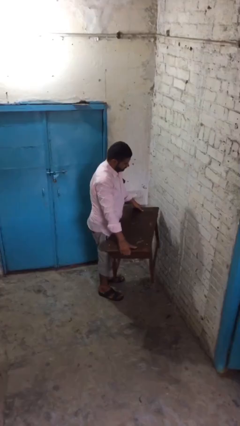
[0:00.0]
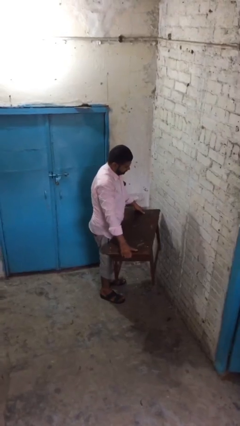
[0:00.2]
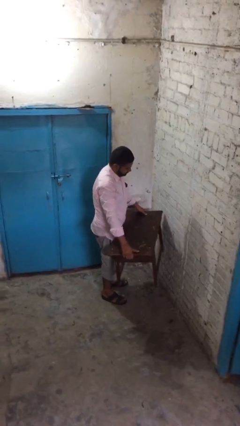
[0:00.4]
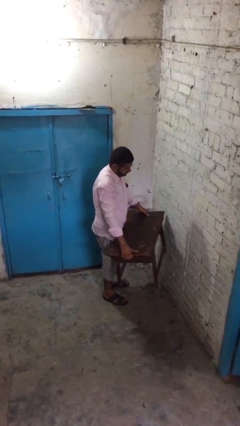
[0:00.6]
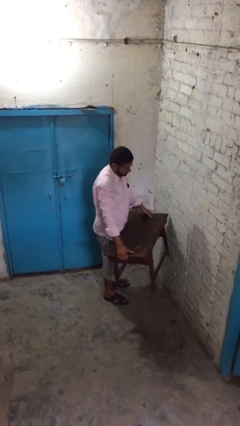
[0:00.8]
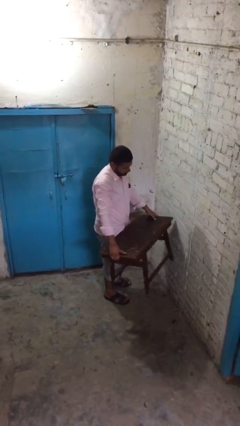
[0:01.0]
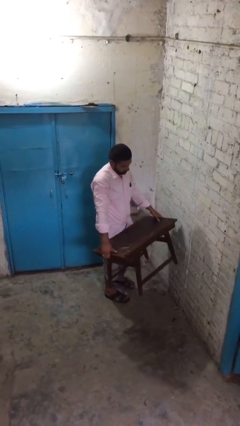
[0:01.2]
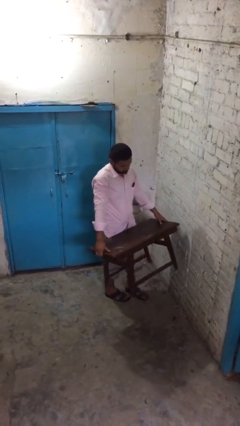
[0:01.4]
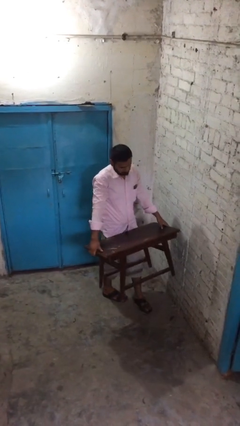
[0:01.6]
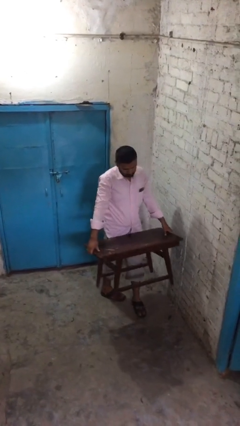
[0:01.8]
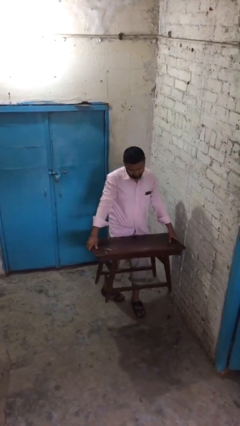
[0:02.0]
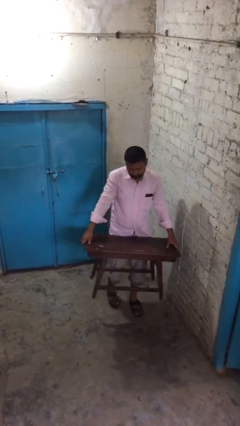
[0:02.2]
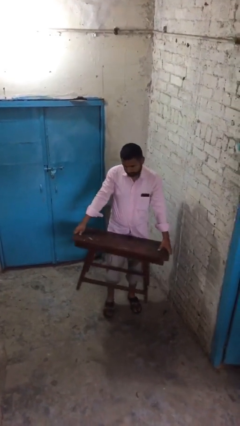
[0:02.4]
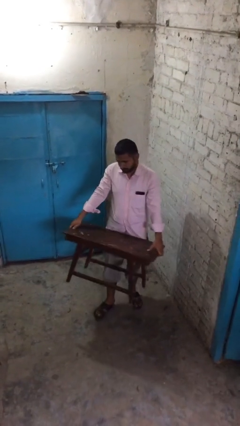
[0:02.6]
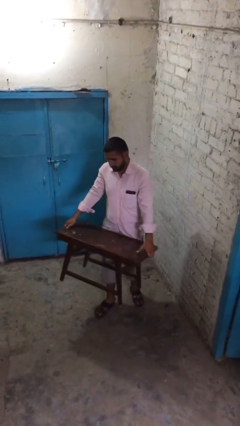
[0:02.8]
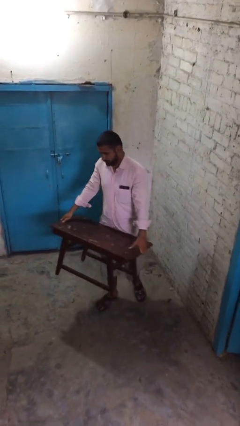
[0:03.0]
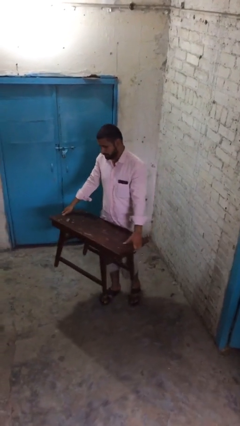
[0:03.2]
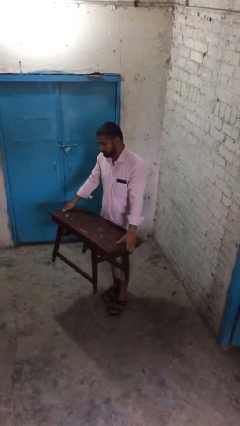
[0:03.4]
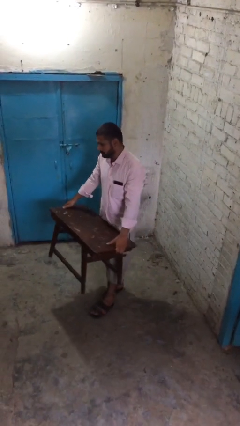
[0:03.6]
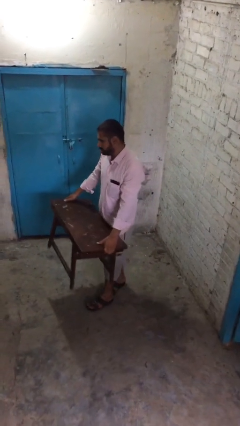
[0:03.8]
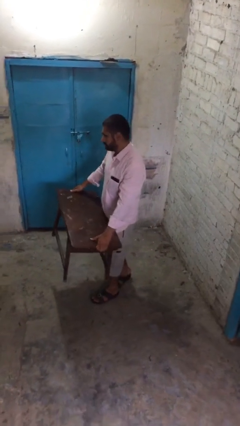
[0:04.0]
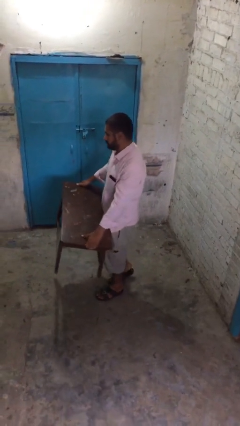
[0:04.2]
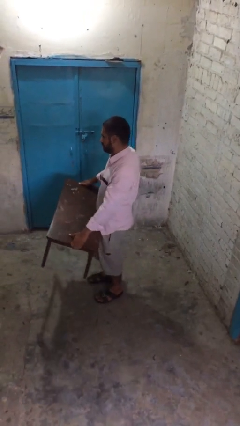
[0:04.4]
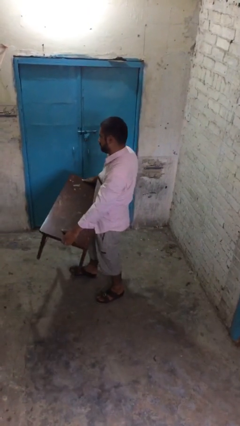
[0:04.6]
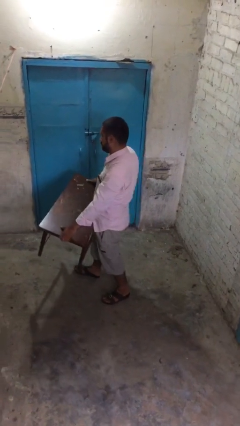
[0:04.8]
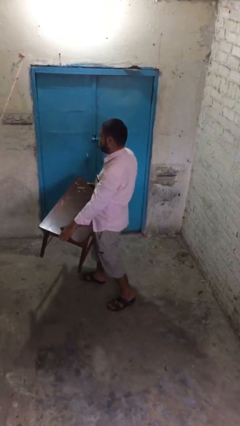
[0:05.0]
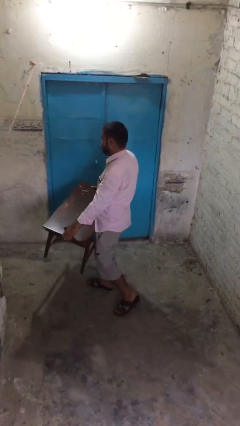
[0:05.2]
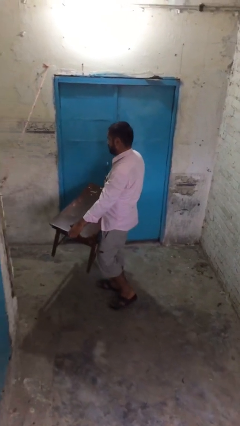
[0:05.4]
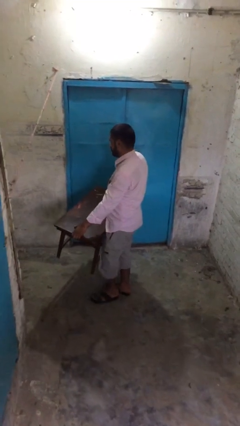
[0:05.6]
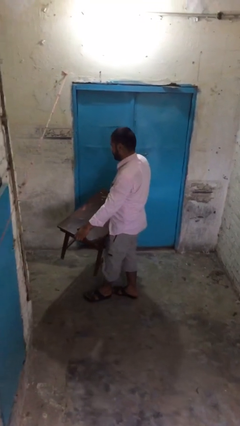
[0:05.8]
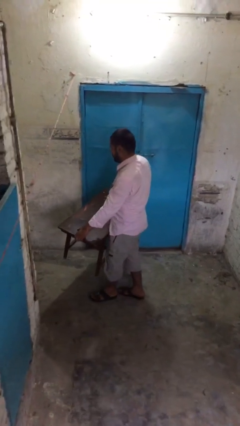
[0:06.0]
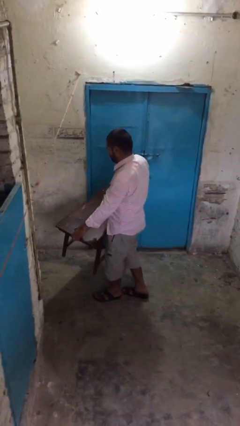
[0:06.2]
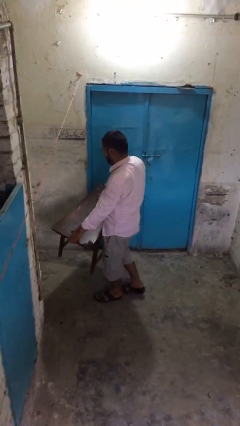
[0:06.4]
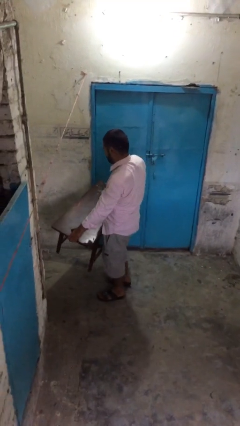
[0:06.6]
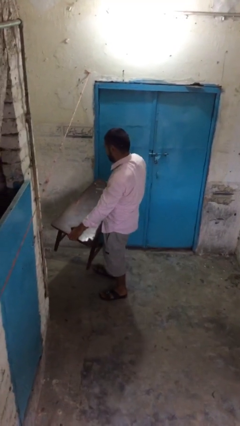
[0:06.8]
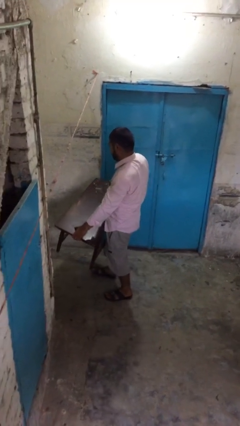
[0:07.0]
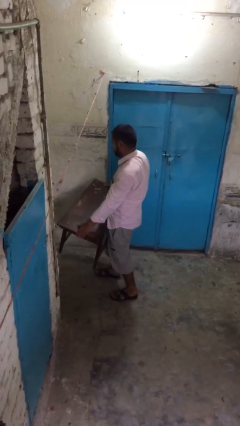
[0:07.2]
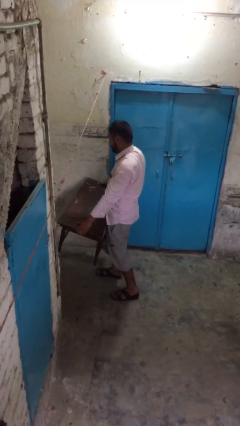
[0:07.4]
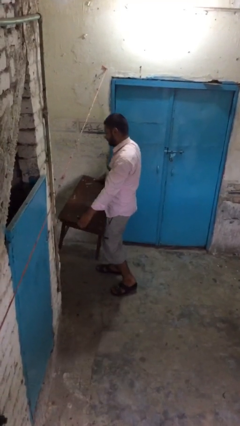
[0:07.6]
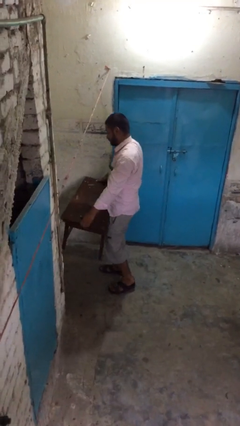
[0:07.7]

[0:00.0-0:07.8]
person carries heavy object

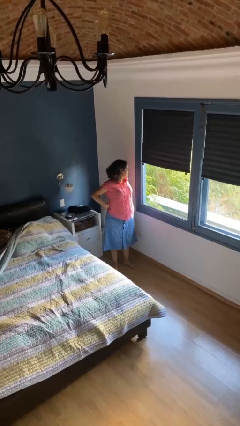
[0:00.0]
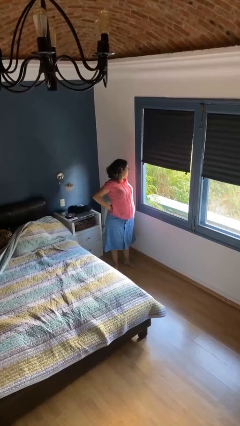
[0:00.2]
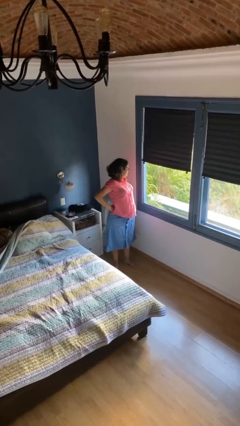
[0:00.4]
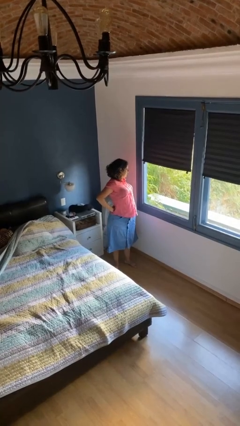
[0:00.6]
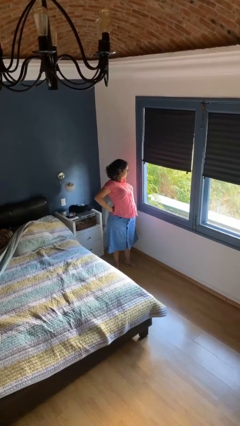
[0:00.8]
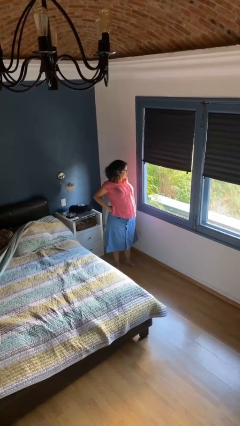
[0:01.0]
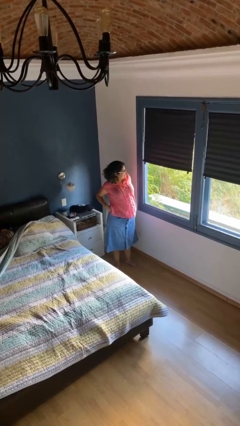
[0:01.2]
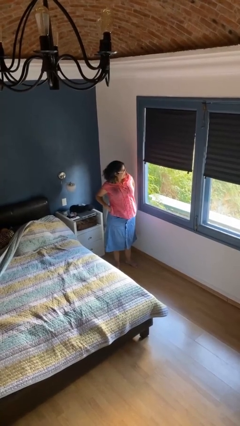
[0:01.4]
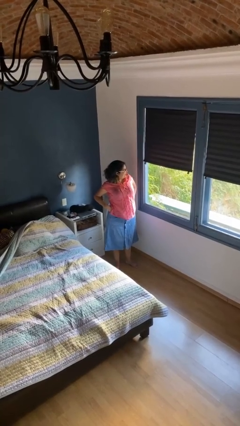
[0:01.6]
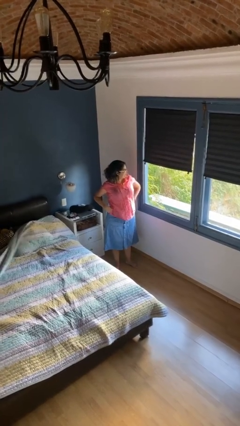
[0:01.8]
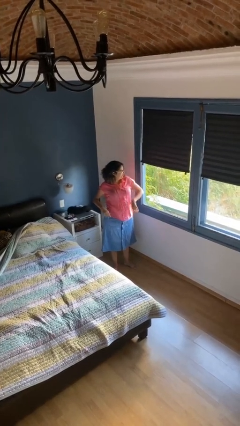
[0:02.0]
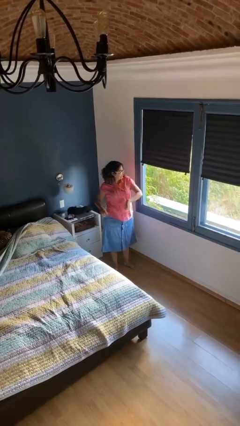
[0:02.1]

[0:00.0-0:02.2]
person stretches back

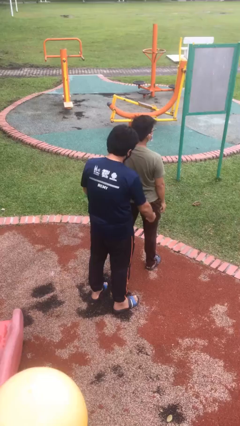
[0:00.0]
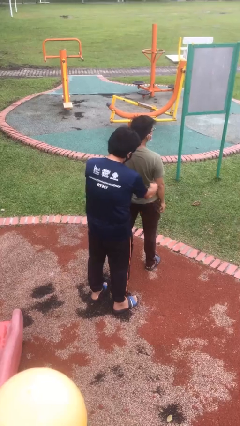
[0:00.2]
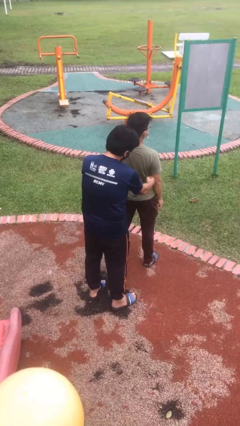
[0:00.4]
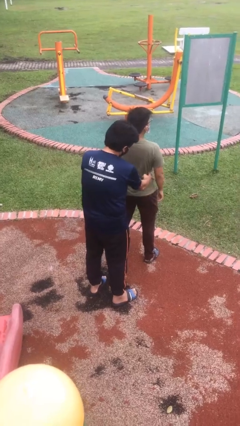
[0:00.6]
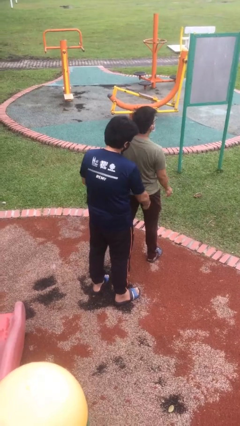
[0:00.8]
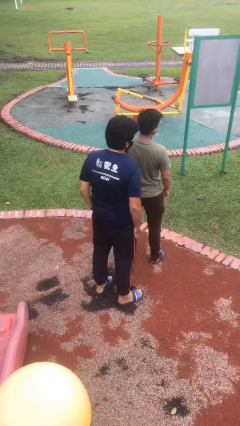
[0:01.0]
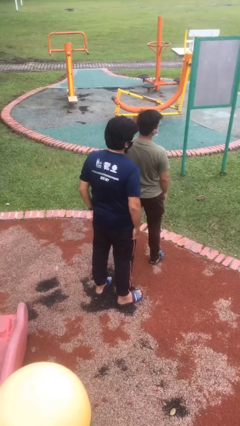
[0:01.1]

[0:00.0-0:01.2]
person tickles person

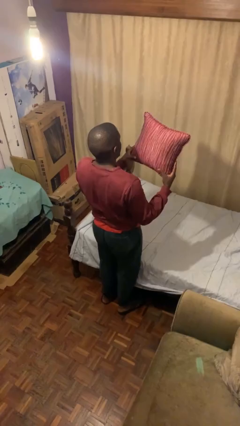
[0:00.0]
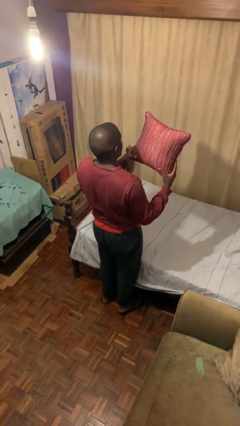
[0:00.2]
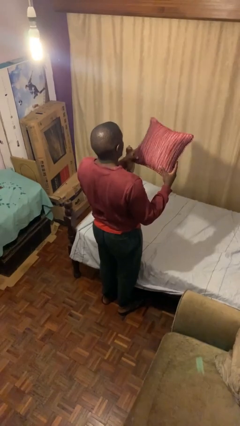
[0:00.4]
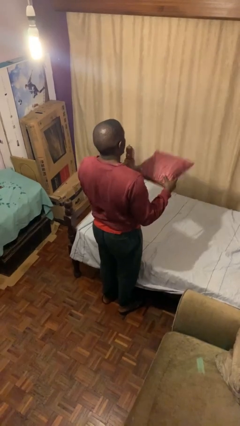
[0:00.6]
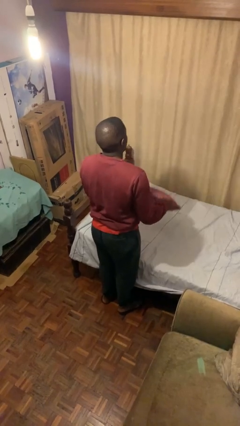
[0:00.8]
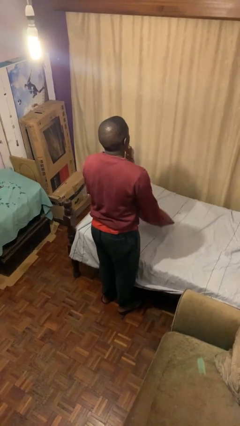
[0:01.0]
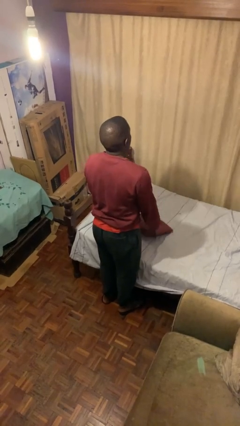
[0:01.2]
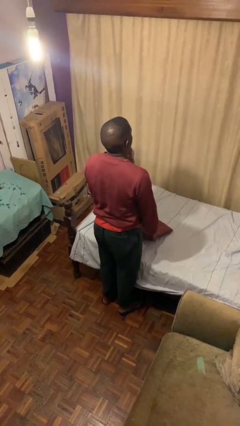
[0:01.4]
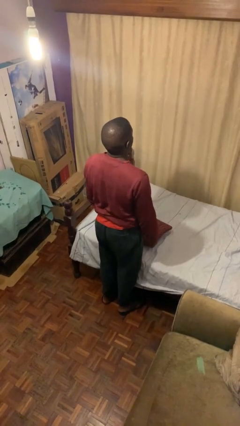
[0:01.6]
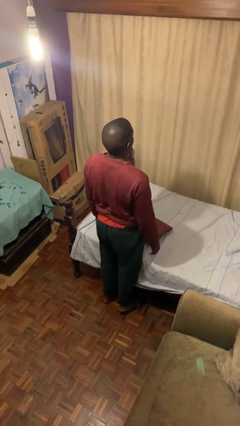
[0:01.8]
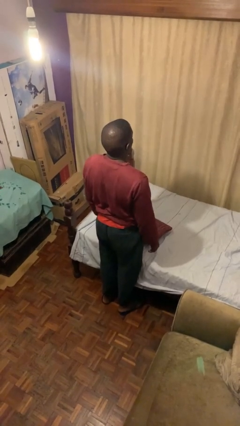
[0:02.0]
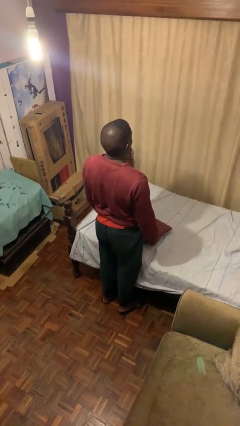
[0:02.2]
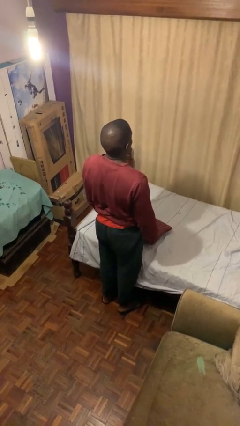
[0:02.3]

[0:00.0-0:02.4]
person puts down object on bed

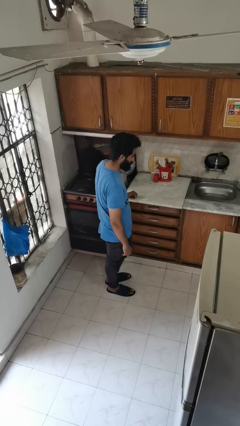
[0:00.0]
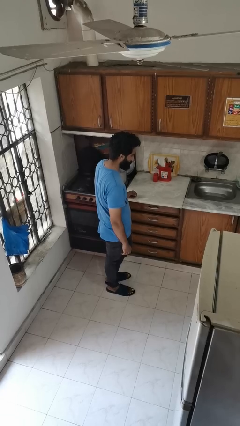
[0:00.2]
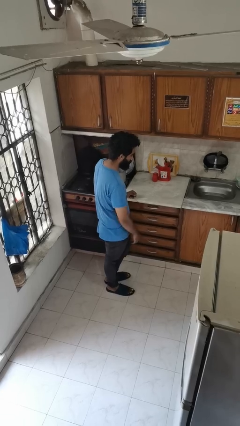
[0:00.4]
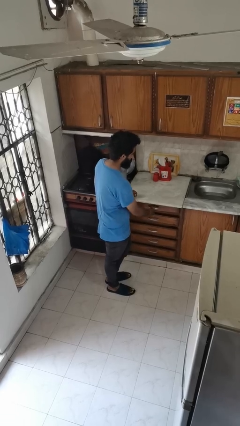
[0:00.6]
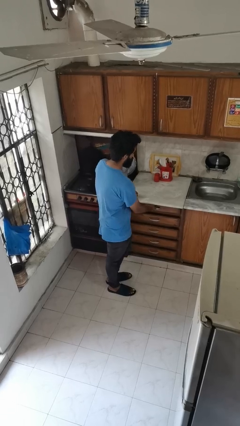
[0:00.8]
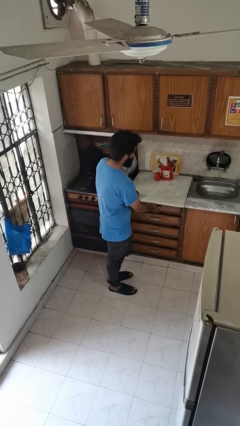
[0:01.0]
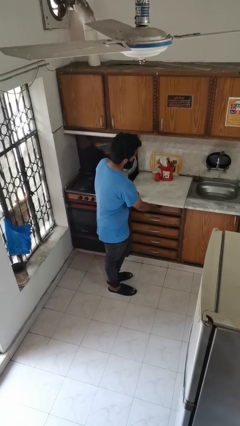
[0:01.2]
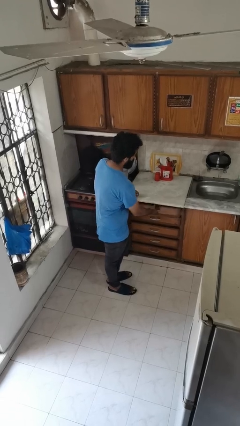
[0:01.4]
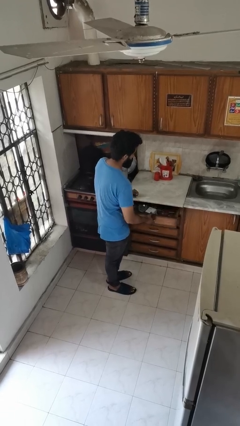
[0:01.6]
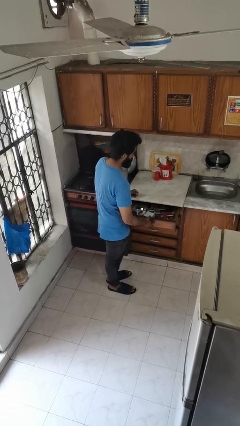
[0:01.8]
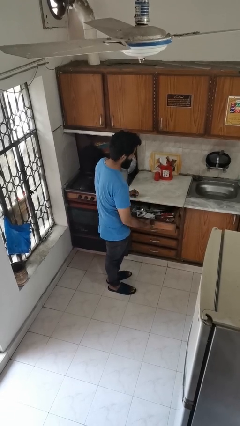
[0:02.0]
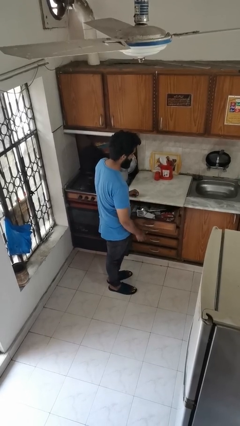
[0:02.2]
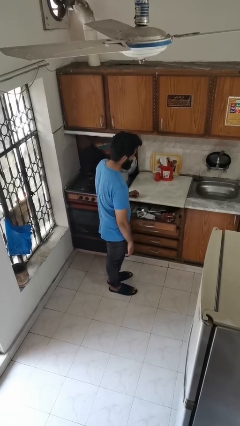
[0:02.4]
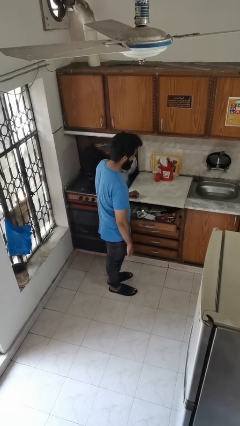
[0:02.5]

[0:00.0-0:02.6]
person opens kitchen drawer

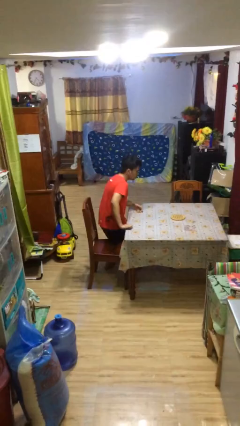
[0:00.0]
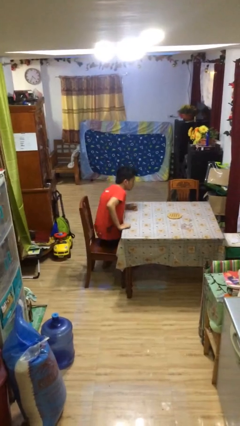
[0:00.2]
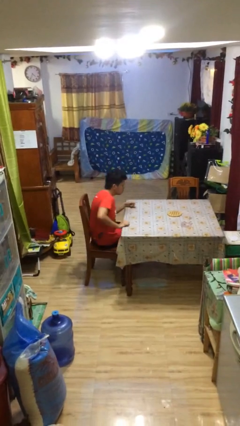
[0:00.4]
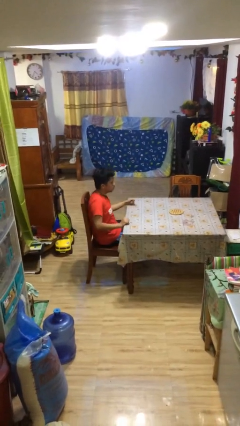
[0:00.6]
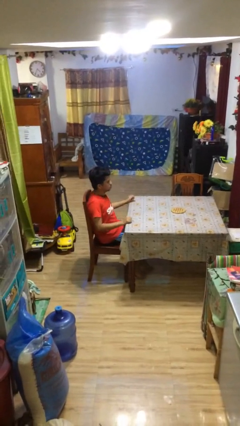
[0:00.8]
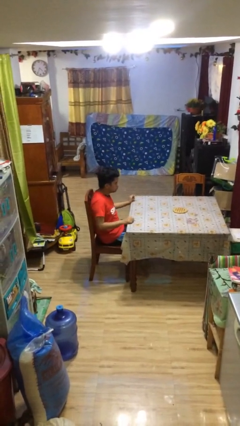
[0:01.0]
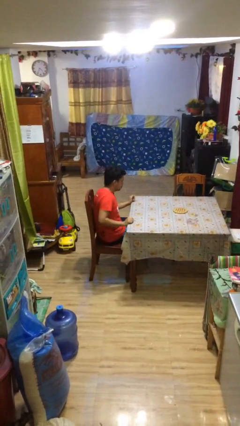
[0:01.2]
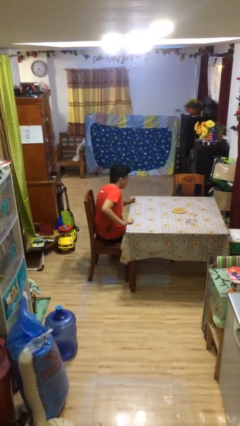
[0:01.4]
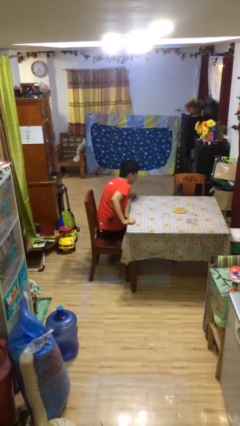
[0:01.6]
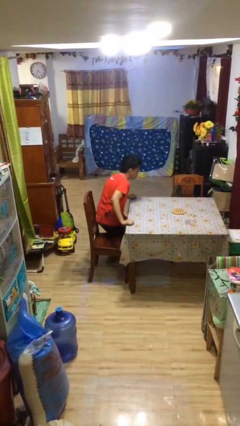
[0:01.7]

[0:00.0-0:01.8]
person sits down
